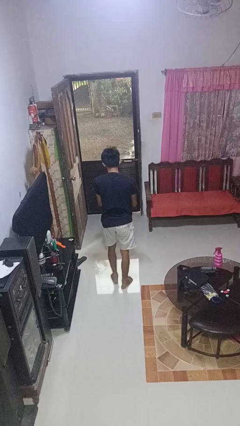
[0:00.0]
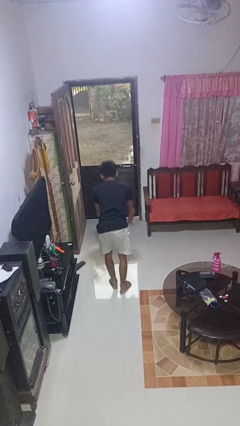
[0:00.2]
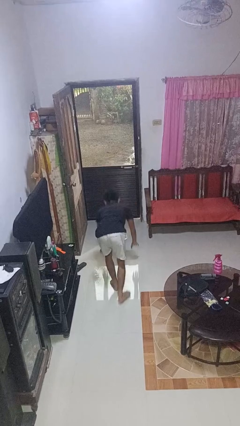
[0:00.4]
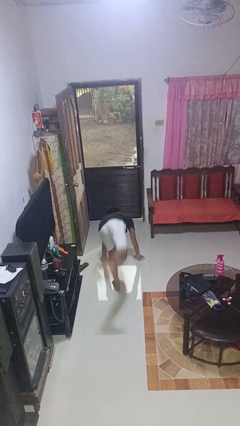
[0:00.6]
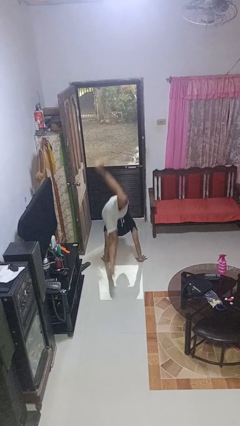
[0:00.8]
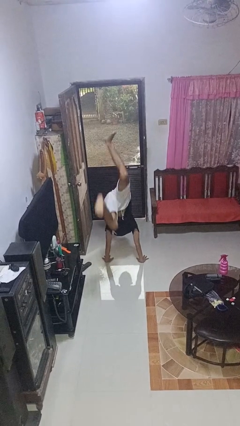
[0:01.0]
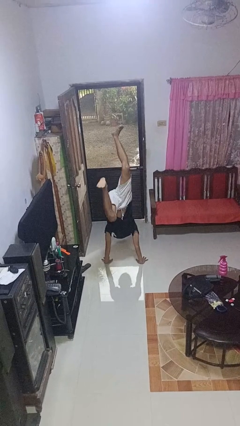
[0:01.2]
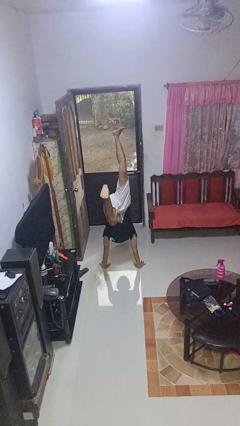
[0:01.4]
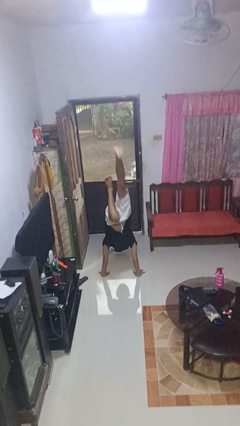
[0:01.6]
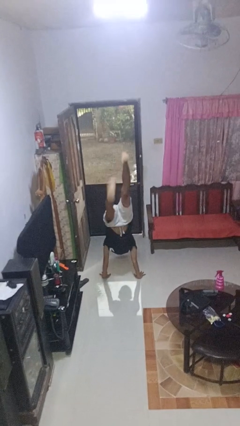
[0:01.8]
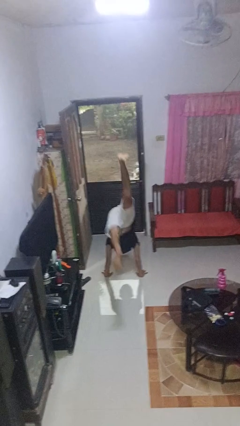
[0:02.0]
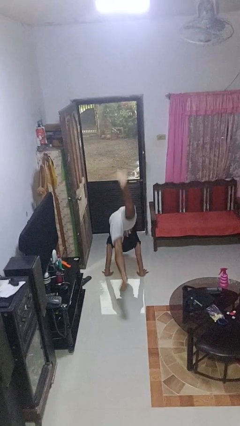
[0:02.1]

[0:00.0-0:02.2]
person handstand

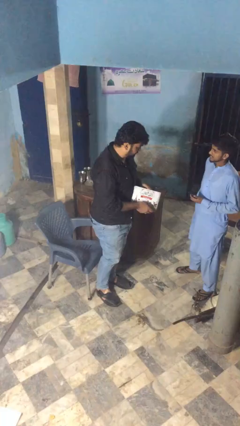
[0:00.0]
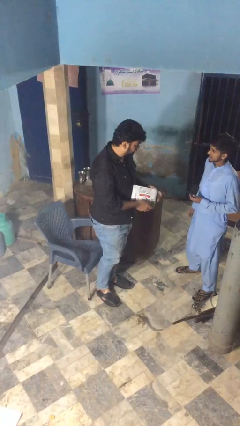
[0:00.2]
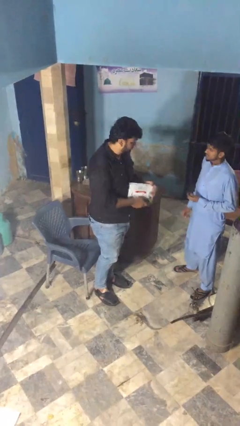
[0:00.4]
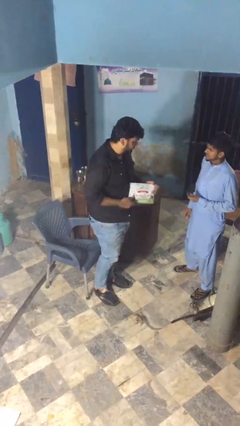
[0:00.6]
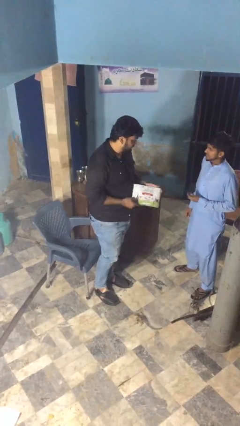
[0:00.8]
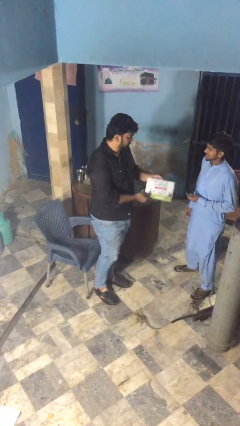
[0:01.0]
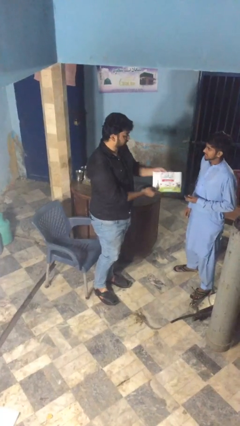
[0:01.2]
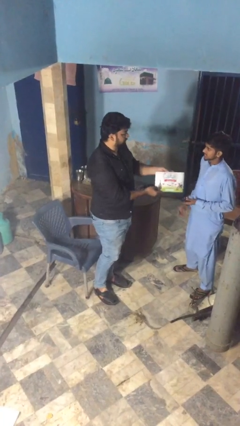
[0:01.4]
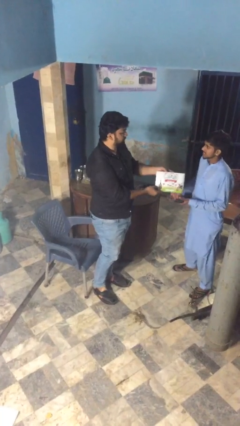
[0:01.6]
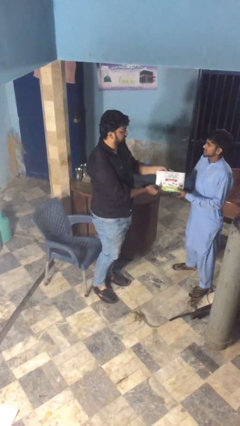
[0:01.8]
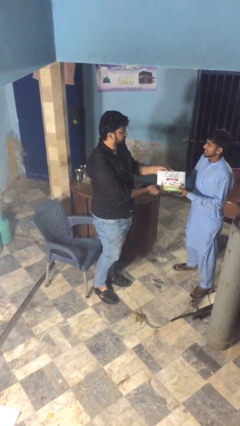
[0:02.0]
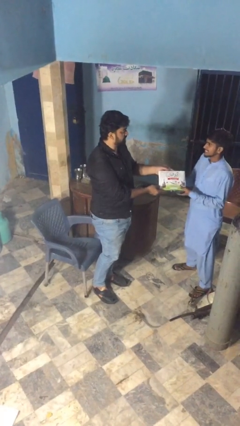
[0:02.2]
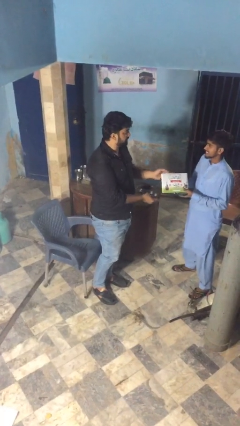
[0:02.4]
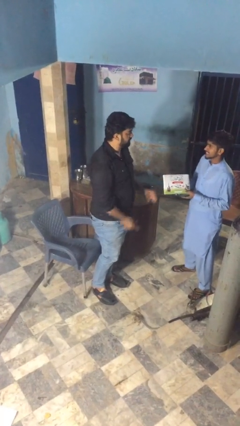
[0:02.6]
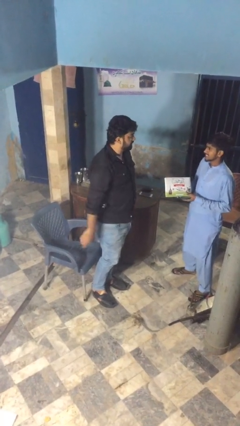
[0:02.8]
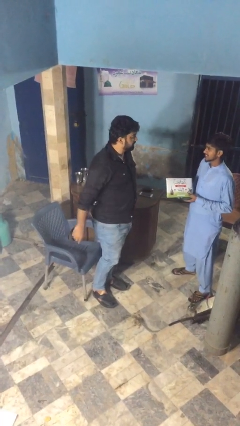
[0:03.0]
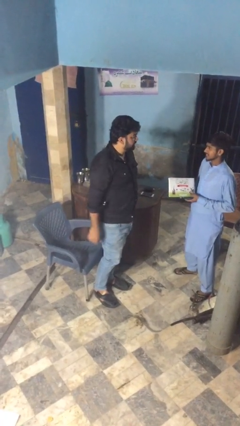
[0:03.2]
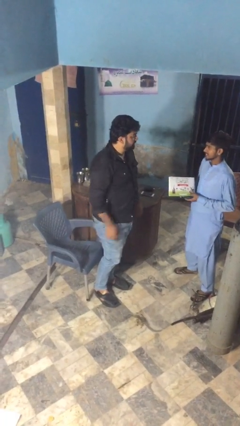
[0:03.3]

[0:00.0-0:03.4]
person transfers object to person

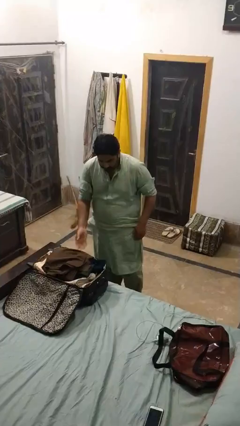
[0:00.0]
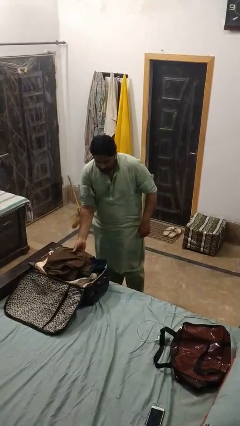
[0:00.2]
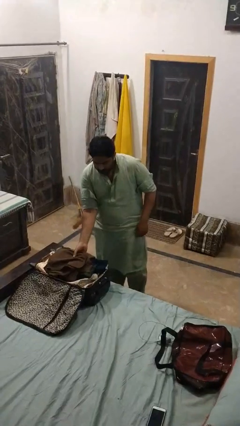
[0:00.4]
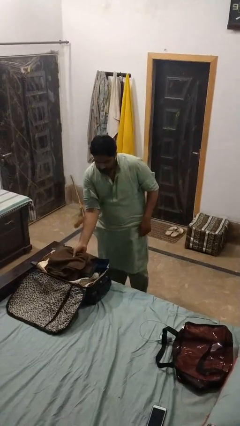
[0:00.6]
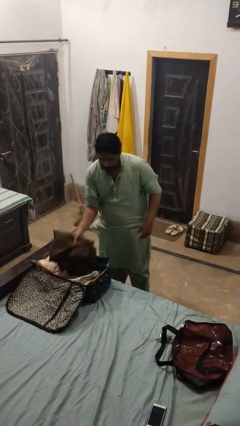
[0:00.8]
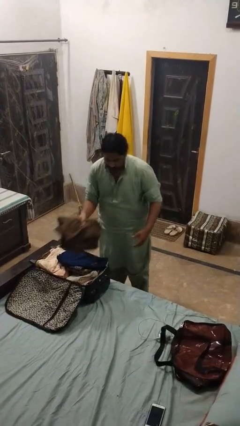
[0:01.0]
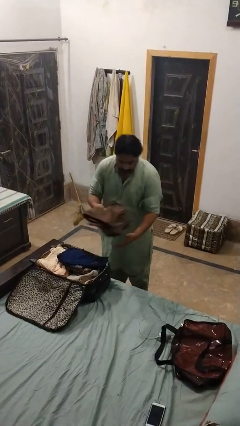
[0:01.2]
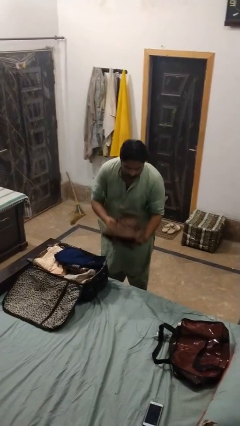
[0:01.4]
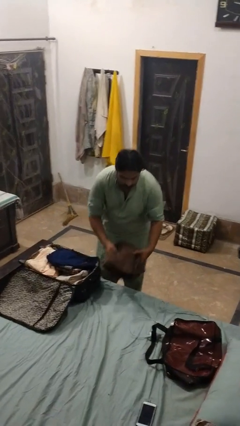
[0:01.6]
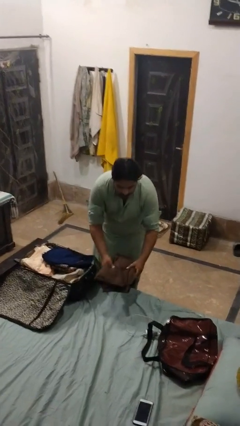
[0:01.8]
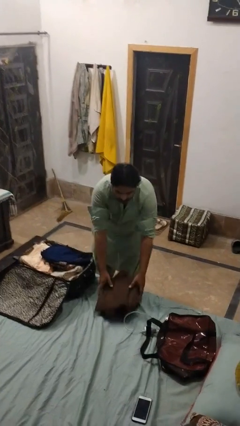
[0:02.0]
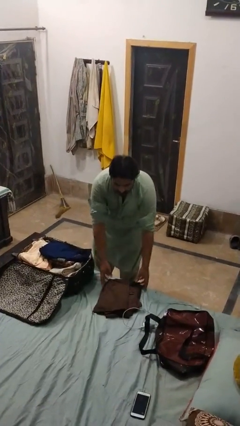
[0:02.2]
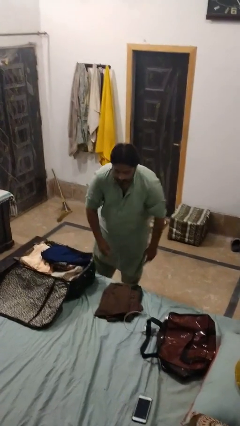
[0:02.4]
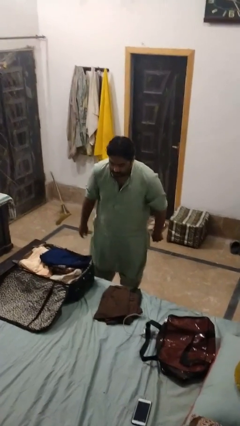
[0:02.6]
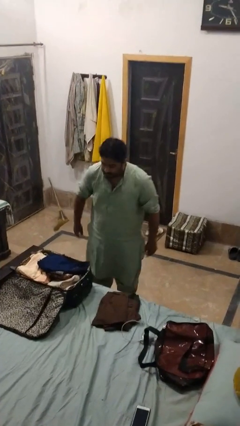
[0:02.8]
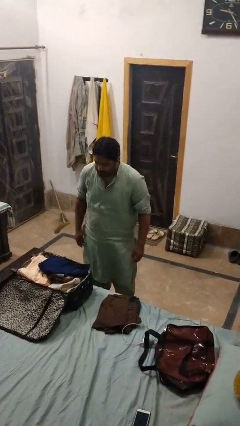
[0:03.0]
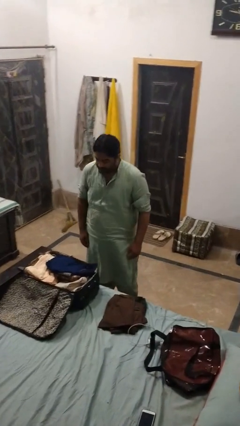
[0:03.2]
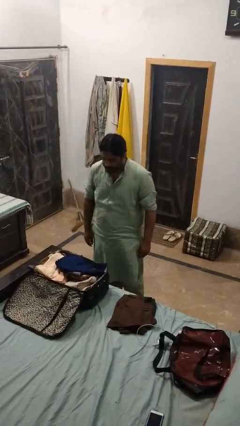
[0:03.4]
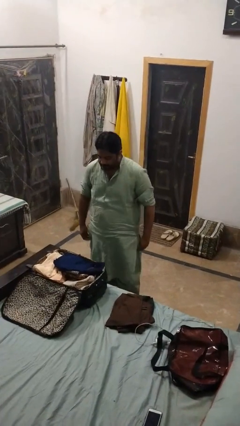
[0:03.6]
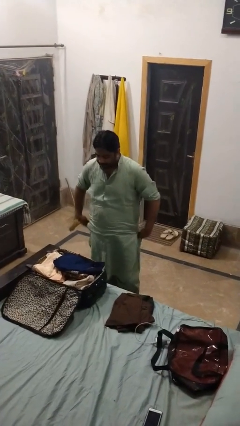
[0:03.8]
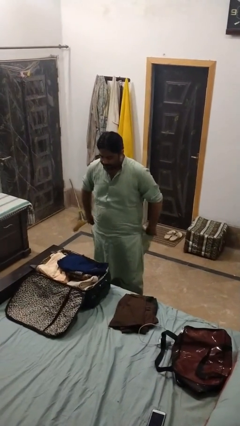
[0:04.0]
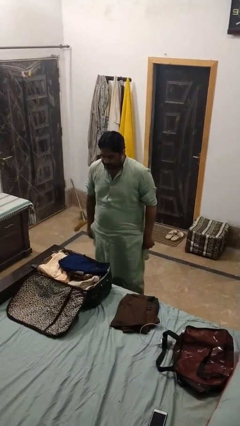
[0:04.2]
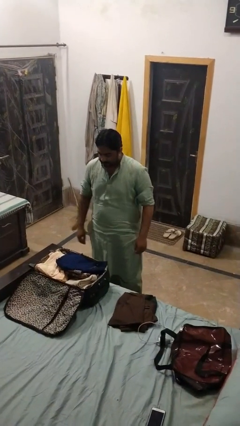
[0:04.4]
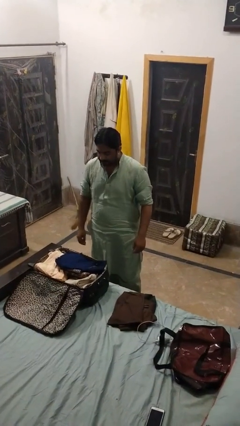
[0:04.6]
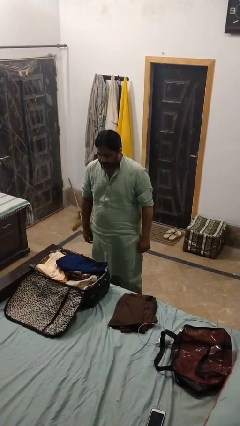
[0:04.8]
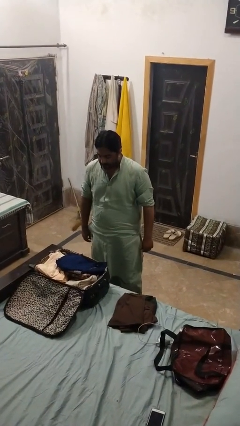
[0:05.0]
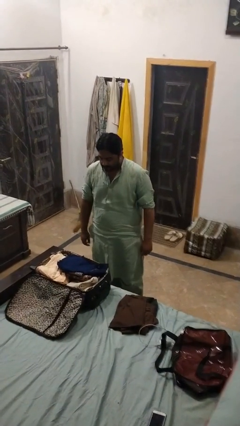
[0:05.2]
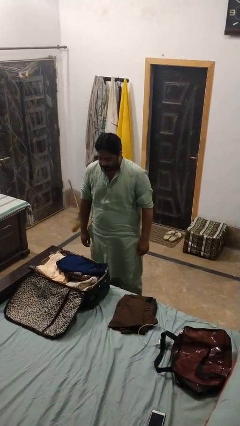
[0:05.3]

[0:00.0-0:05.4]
person unloads clothes from suitcase

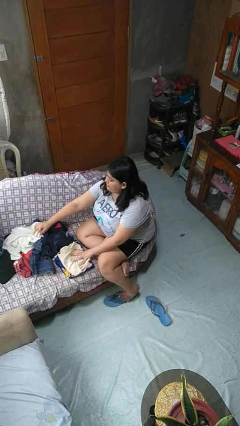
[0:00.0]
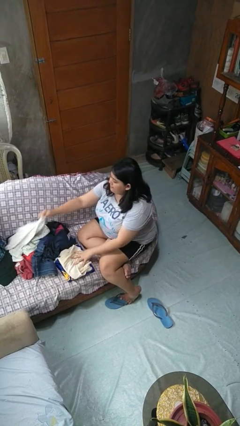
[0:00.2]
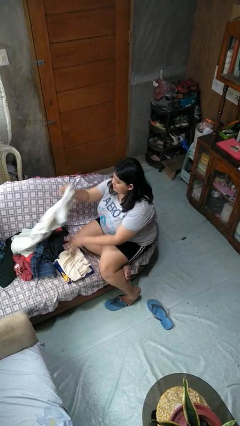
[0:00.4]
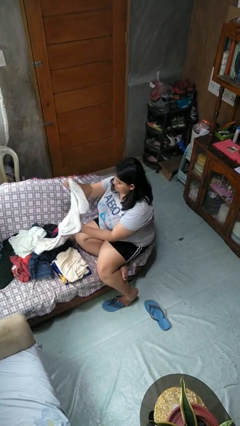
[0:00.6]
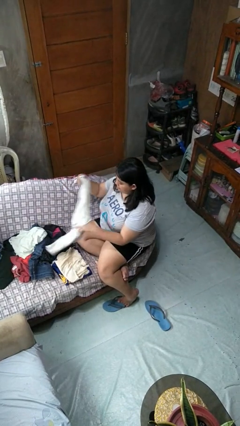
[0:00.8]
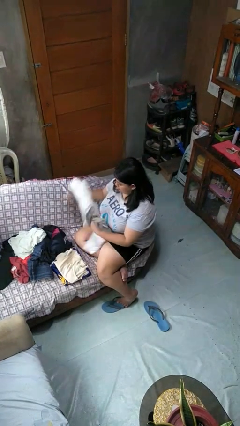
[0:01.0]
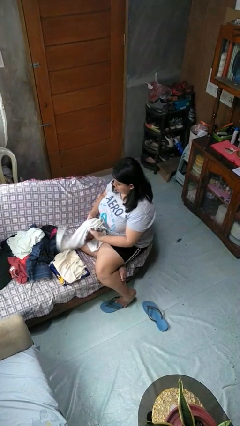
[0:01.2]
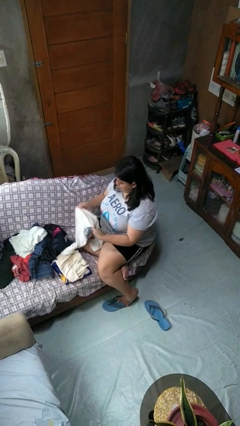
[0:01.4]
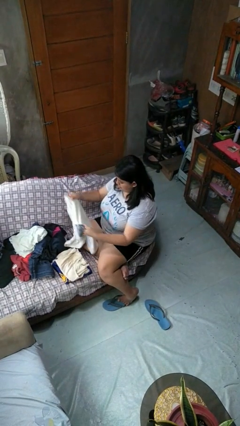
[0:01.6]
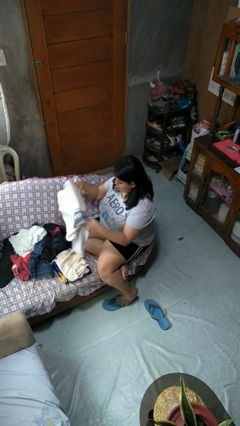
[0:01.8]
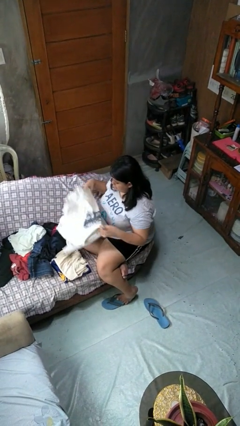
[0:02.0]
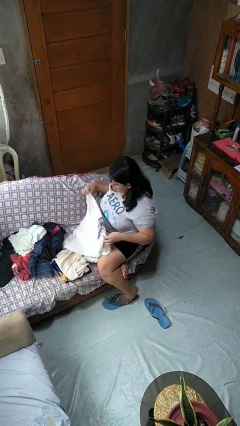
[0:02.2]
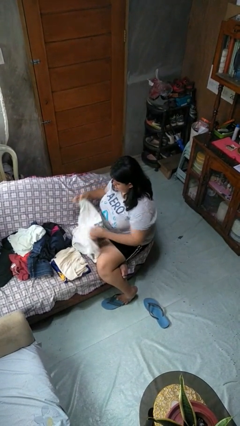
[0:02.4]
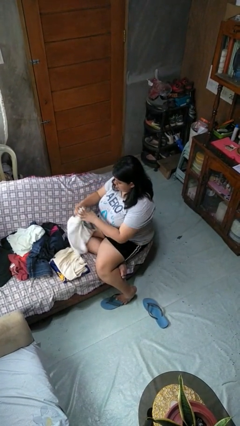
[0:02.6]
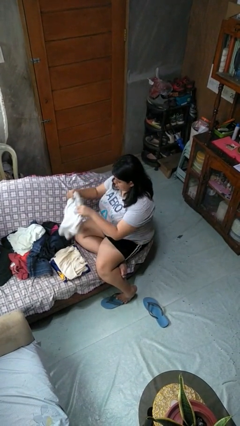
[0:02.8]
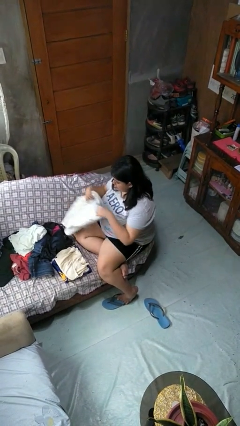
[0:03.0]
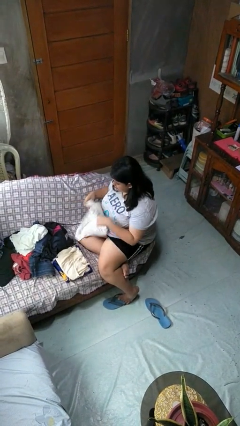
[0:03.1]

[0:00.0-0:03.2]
person folds shirt

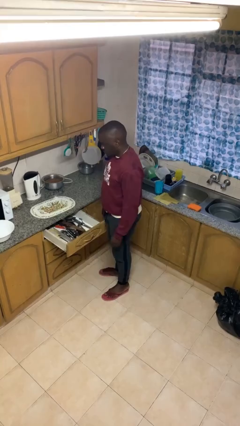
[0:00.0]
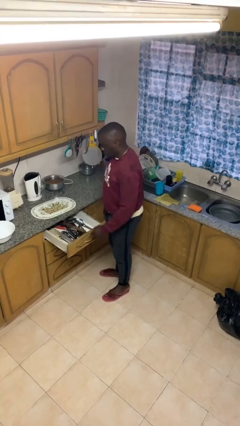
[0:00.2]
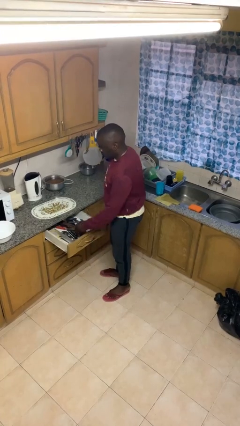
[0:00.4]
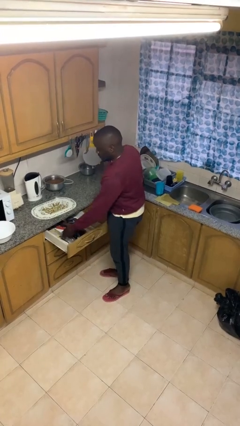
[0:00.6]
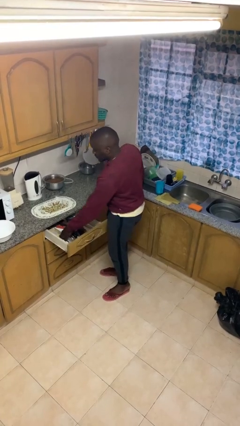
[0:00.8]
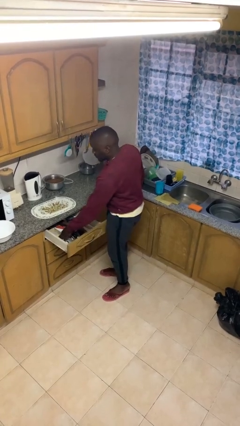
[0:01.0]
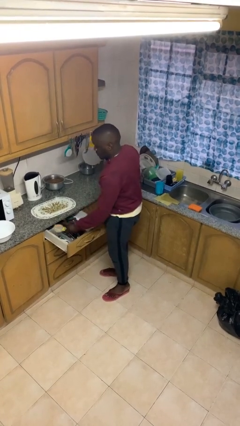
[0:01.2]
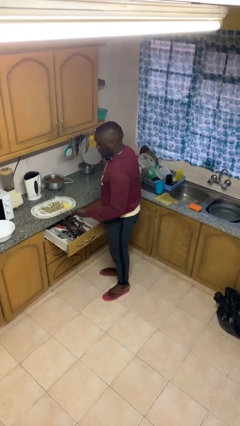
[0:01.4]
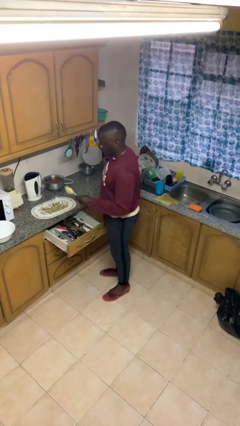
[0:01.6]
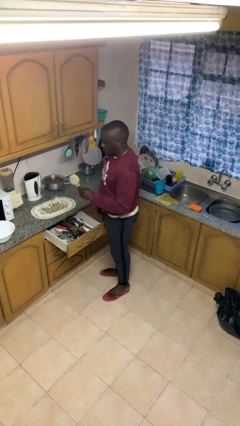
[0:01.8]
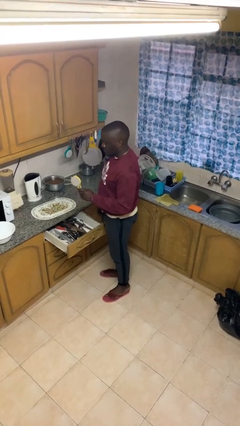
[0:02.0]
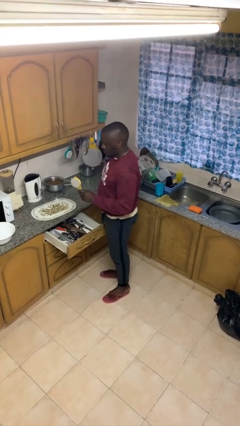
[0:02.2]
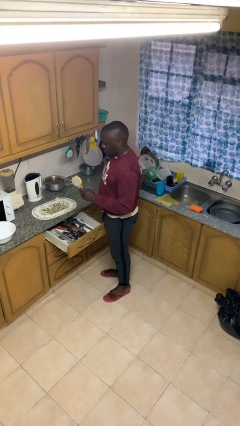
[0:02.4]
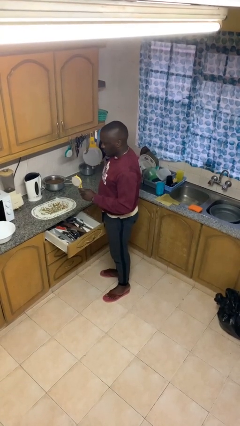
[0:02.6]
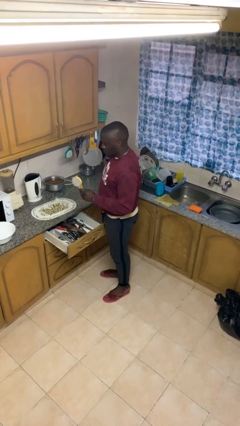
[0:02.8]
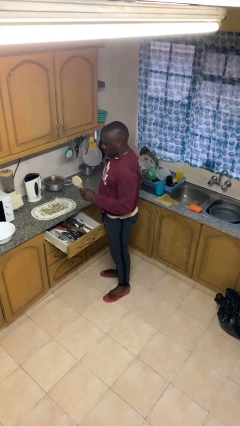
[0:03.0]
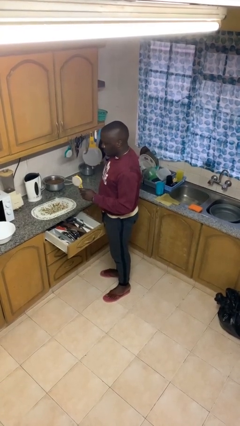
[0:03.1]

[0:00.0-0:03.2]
person takes object from kitchen drawer
